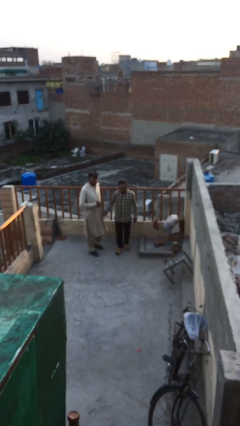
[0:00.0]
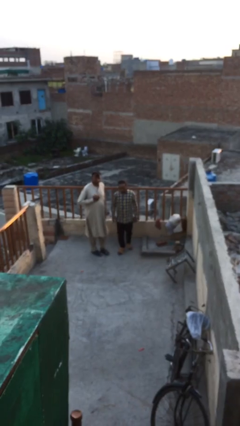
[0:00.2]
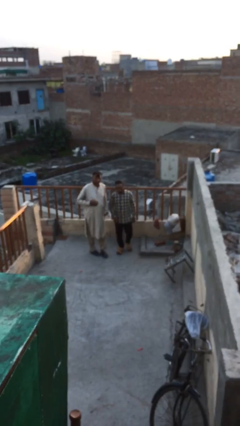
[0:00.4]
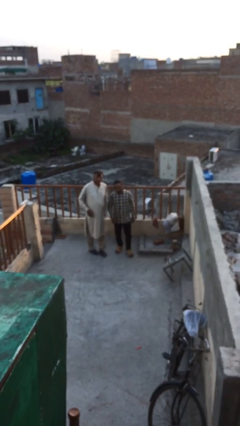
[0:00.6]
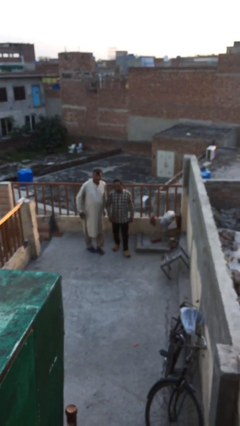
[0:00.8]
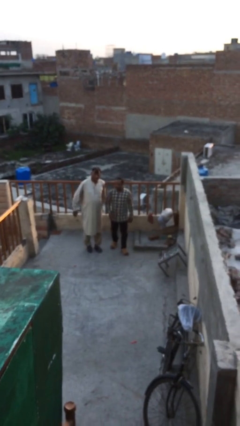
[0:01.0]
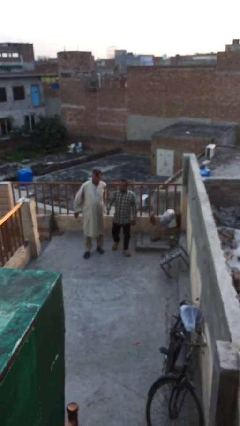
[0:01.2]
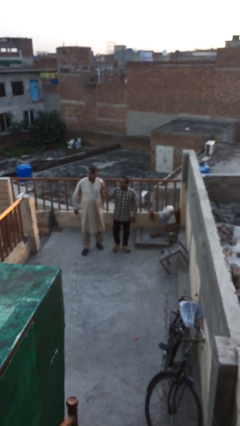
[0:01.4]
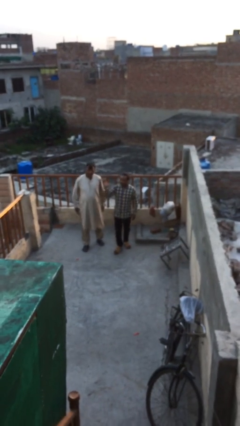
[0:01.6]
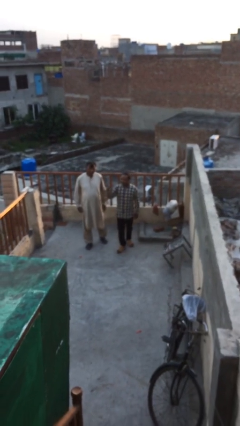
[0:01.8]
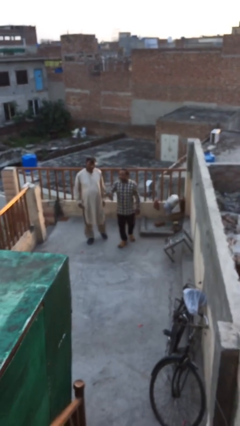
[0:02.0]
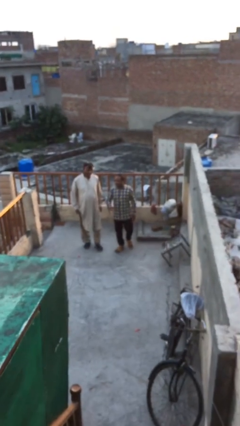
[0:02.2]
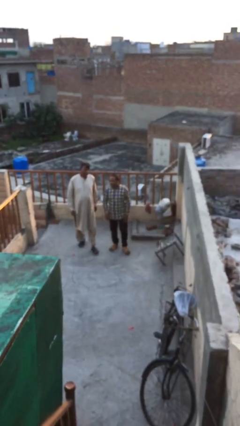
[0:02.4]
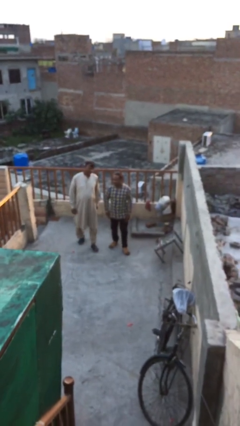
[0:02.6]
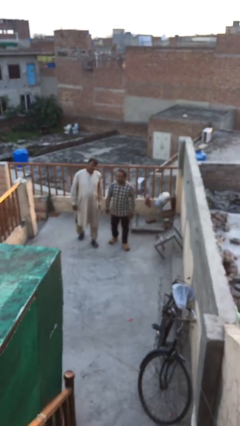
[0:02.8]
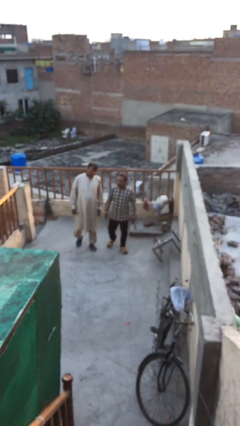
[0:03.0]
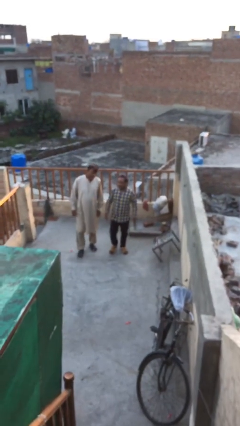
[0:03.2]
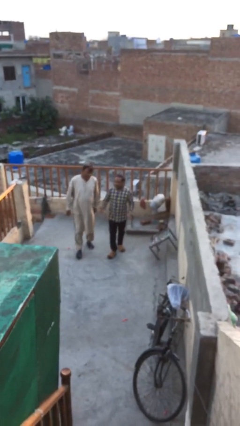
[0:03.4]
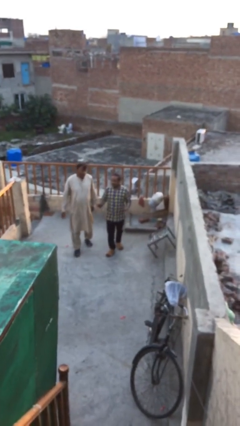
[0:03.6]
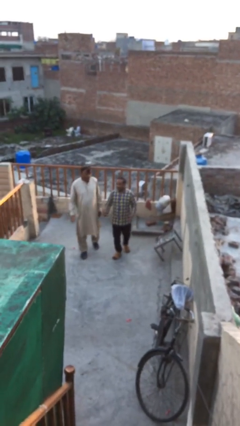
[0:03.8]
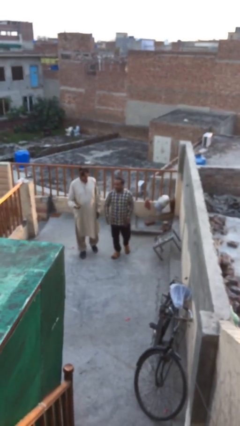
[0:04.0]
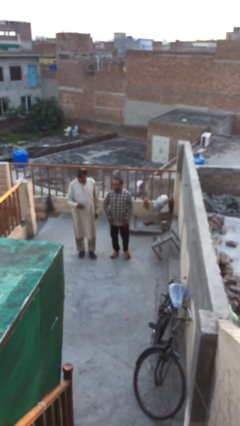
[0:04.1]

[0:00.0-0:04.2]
person talks to person

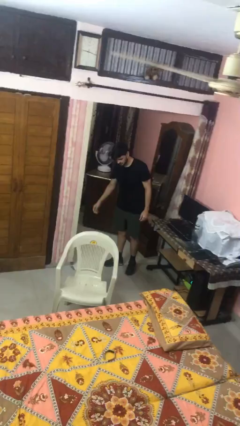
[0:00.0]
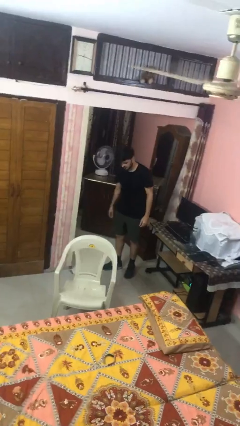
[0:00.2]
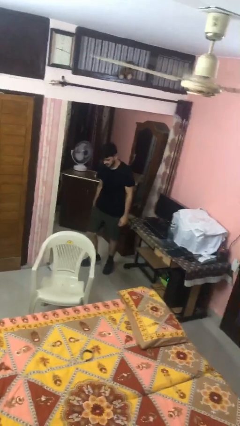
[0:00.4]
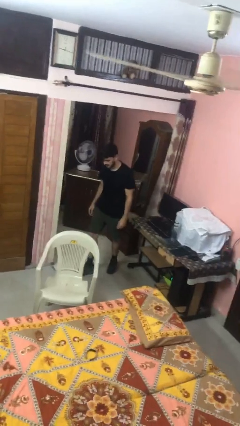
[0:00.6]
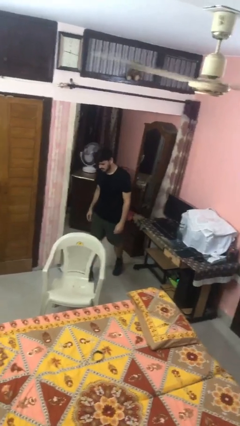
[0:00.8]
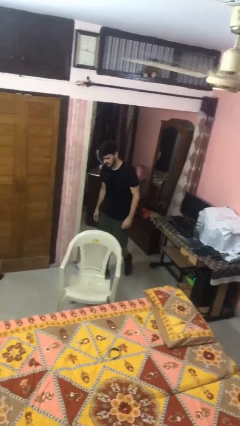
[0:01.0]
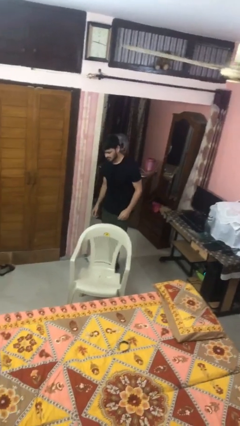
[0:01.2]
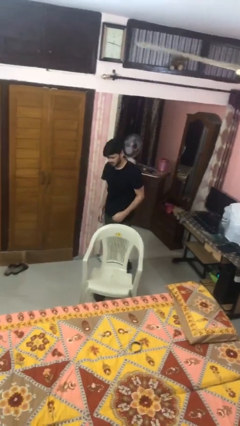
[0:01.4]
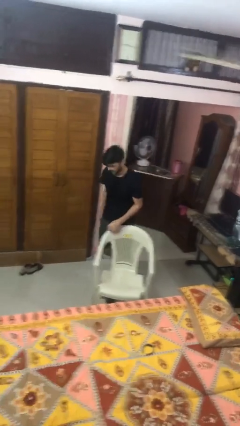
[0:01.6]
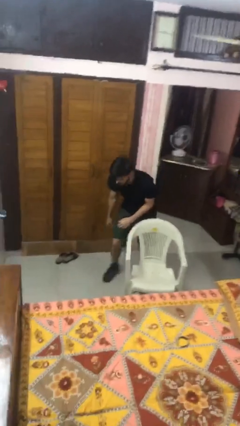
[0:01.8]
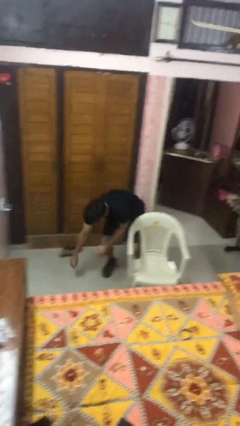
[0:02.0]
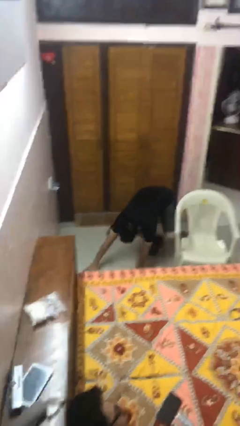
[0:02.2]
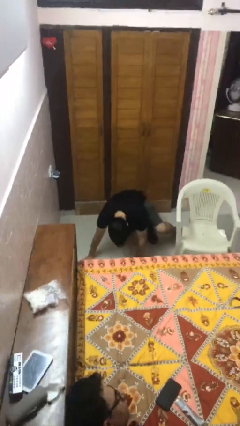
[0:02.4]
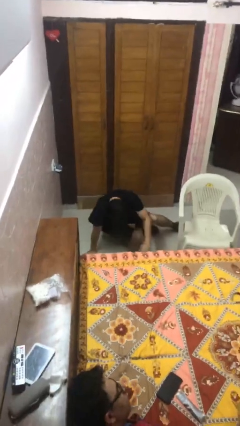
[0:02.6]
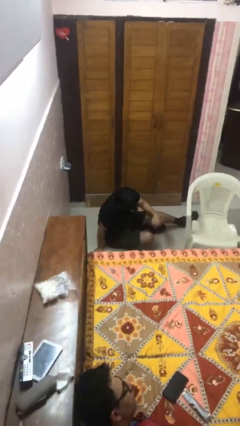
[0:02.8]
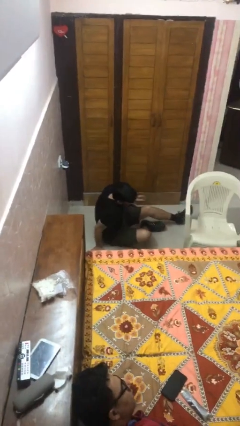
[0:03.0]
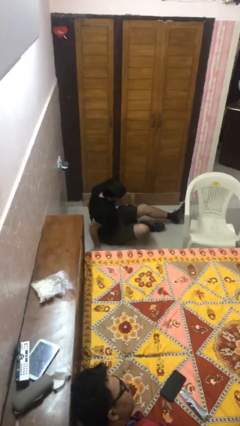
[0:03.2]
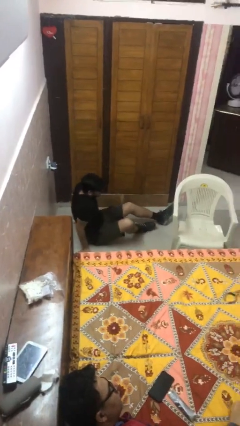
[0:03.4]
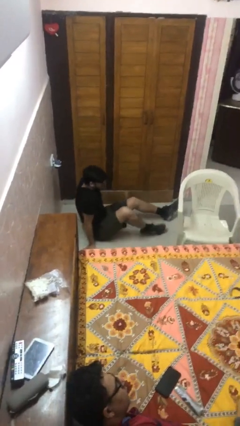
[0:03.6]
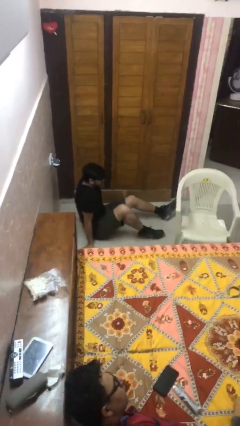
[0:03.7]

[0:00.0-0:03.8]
person trips on object on floor

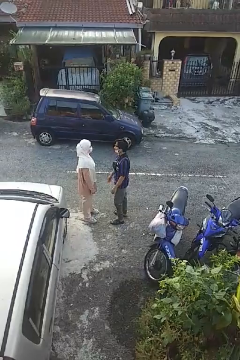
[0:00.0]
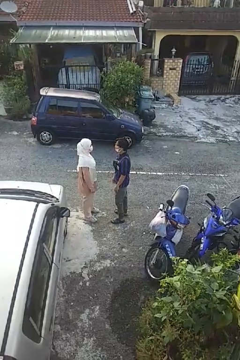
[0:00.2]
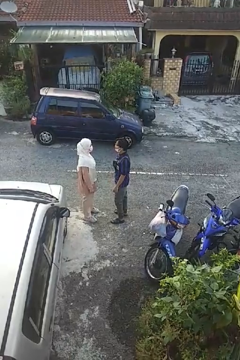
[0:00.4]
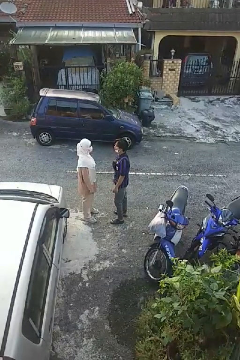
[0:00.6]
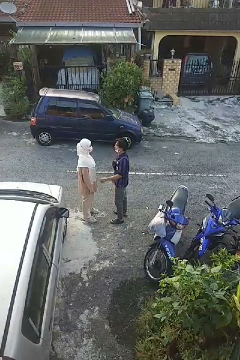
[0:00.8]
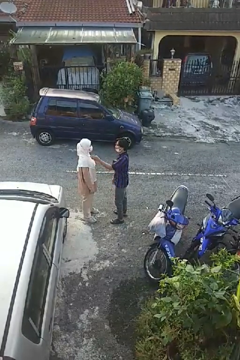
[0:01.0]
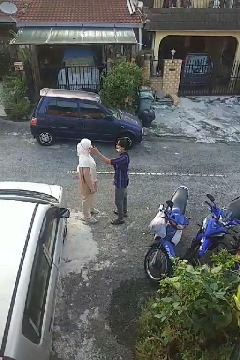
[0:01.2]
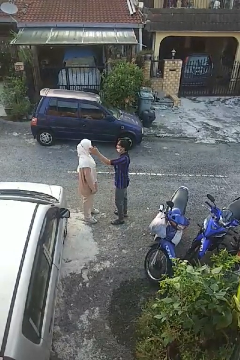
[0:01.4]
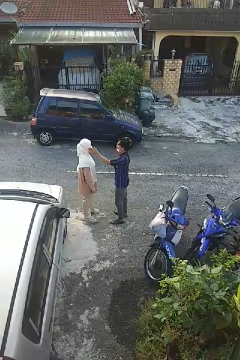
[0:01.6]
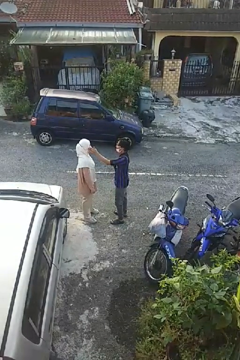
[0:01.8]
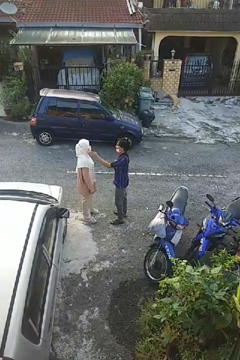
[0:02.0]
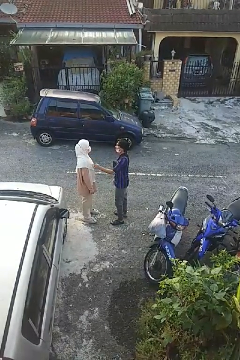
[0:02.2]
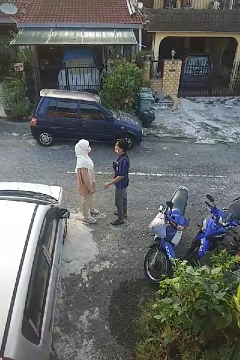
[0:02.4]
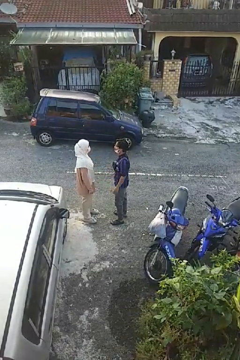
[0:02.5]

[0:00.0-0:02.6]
person touches face of person

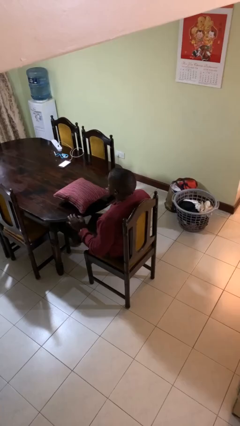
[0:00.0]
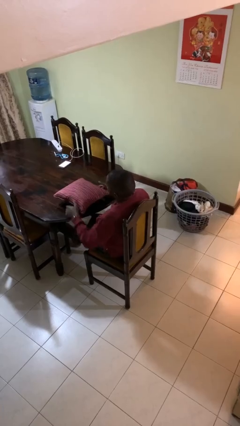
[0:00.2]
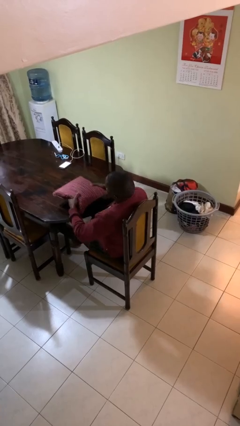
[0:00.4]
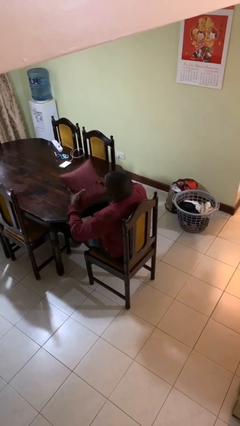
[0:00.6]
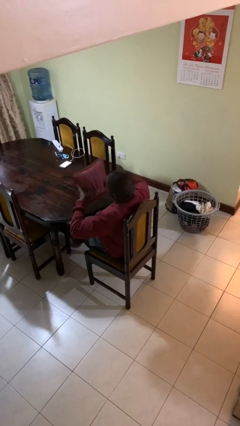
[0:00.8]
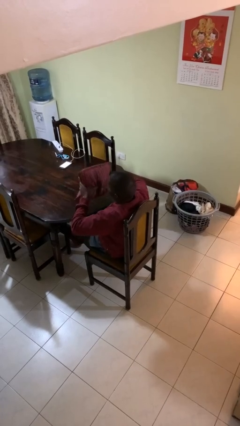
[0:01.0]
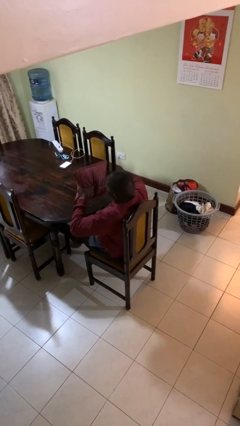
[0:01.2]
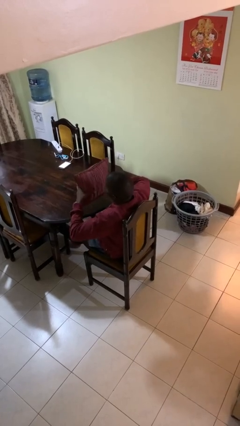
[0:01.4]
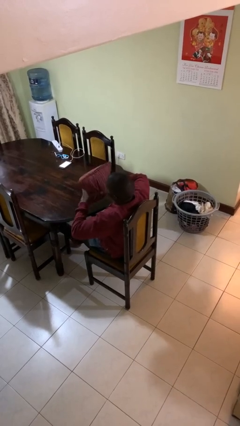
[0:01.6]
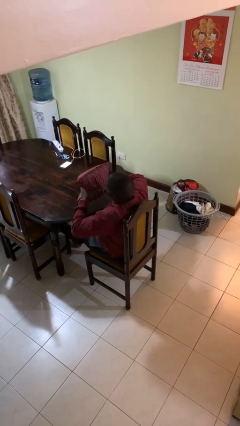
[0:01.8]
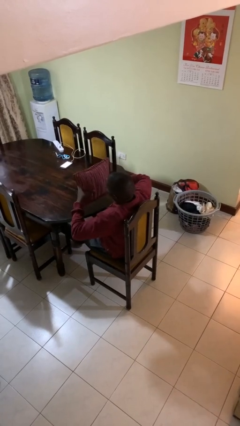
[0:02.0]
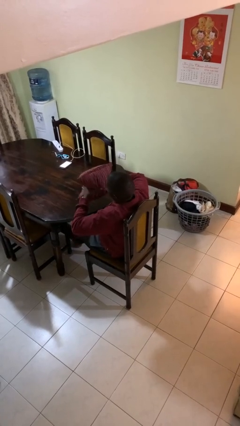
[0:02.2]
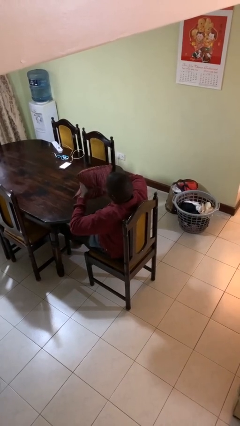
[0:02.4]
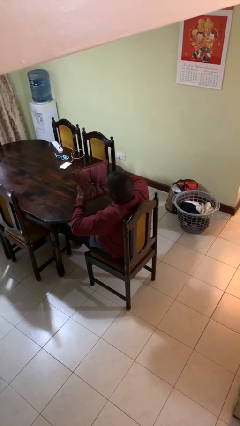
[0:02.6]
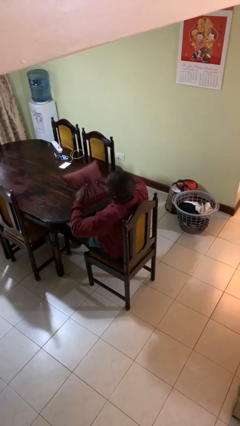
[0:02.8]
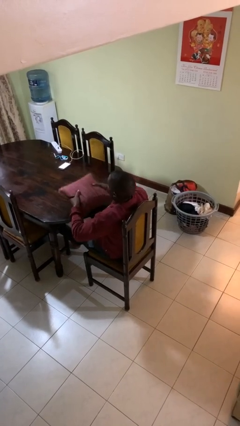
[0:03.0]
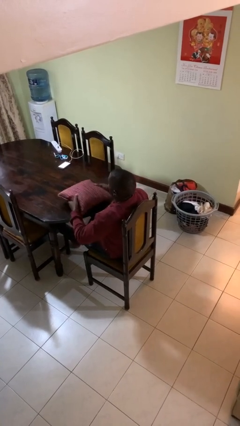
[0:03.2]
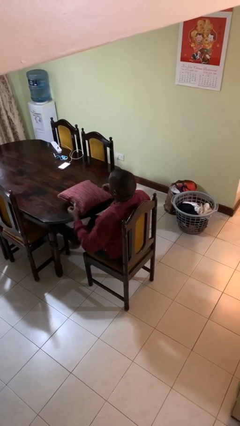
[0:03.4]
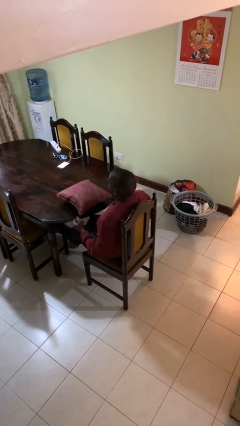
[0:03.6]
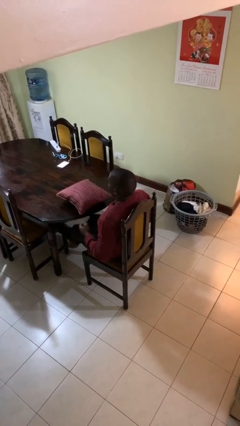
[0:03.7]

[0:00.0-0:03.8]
person squeezes object

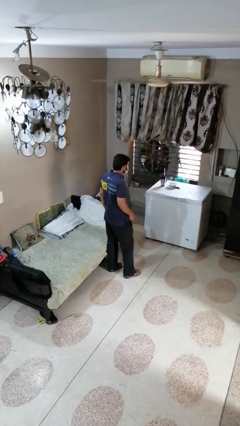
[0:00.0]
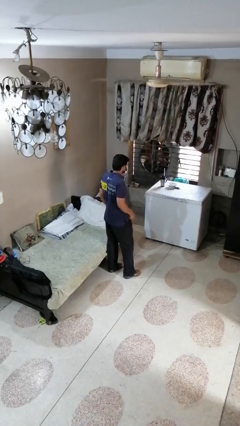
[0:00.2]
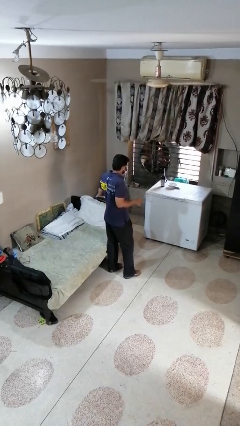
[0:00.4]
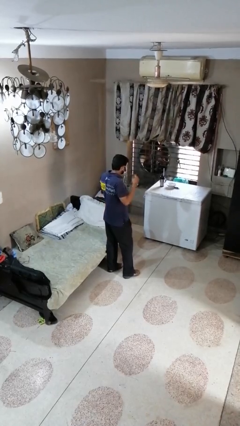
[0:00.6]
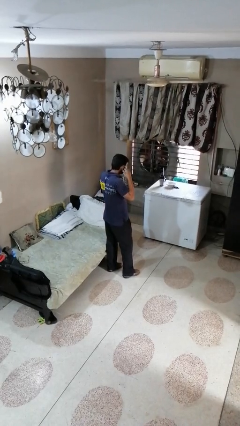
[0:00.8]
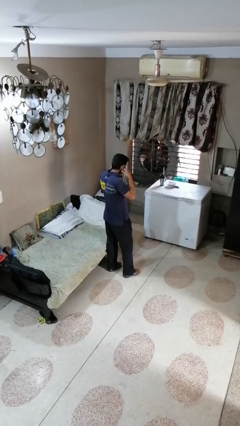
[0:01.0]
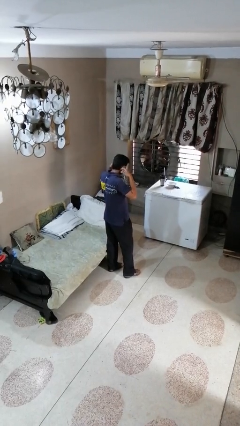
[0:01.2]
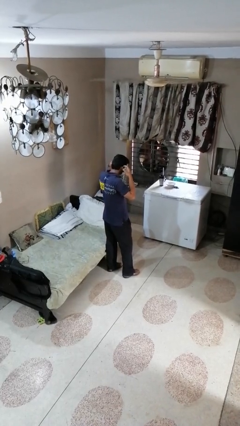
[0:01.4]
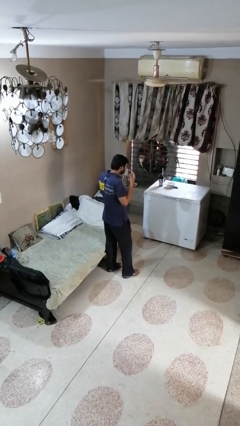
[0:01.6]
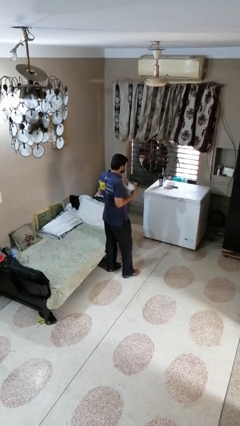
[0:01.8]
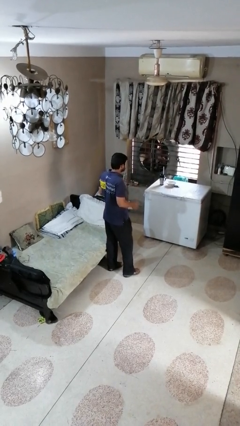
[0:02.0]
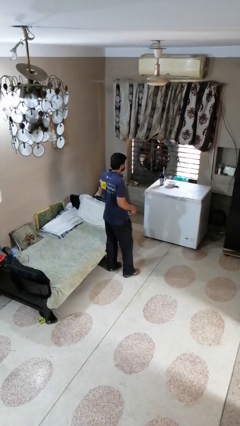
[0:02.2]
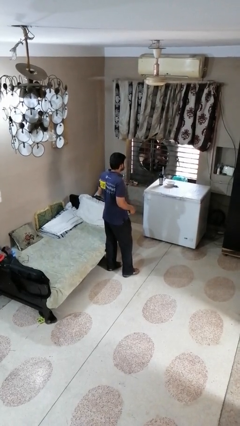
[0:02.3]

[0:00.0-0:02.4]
person takes off facemask

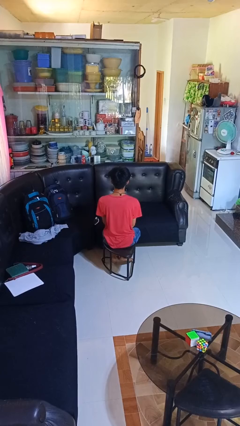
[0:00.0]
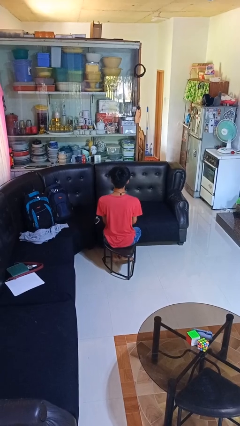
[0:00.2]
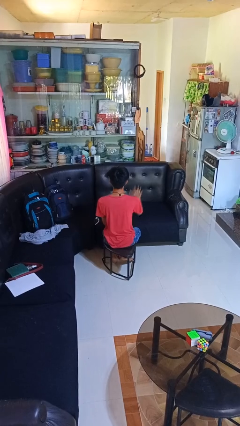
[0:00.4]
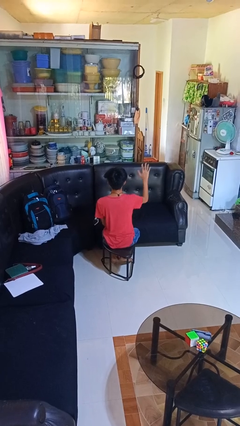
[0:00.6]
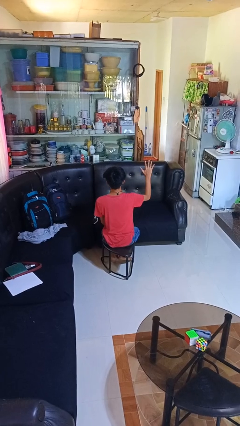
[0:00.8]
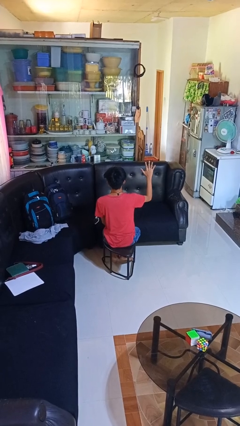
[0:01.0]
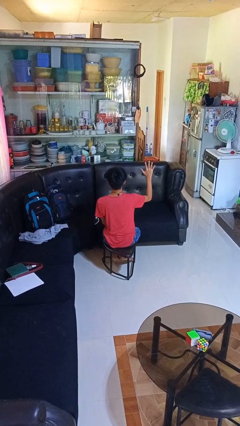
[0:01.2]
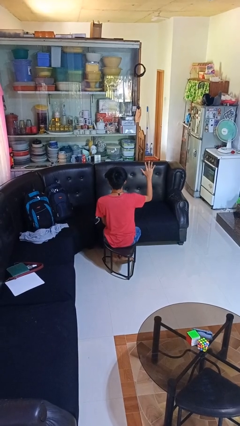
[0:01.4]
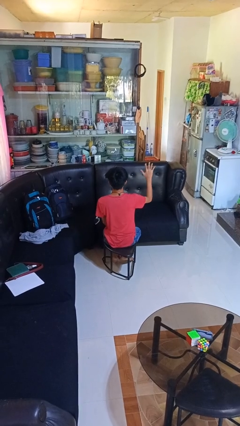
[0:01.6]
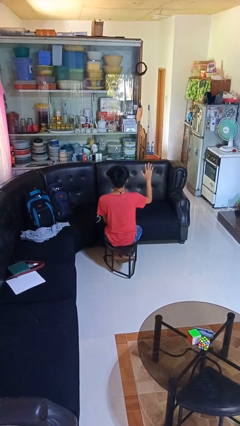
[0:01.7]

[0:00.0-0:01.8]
person gestures number five
